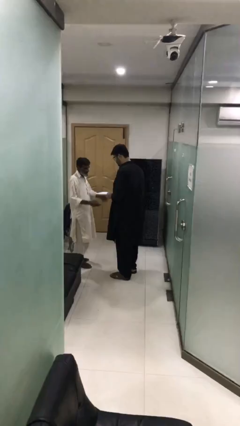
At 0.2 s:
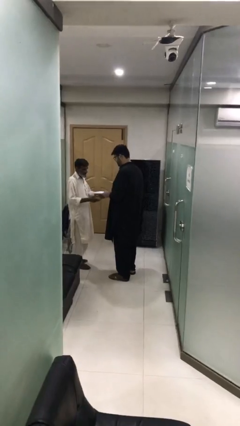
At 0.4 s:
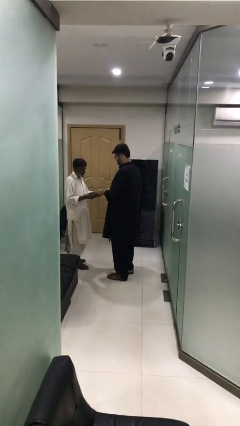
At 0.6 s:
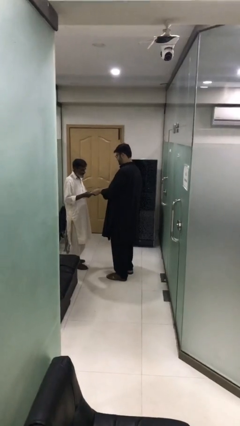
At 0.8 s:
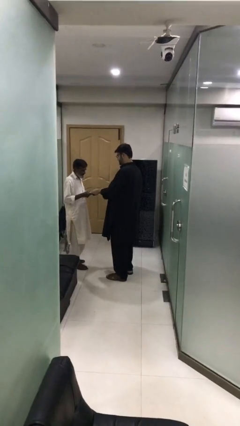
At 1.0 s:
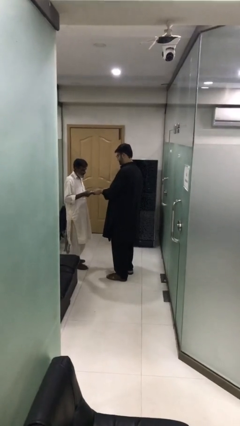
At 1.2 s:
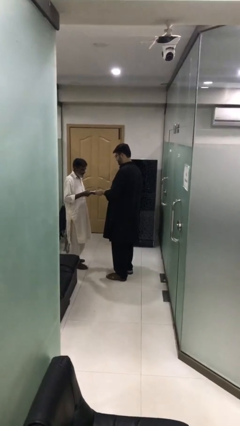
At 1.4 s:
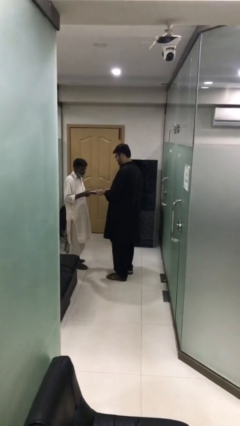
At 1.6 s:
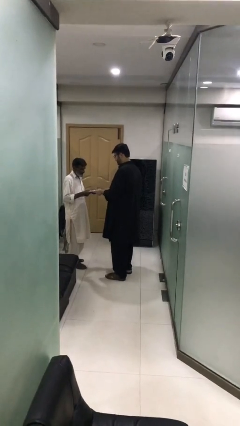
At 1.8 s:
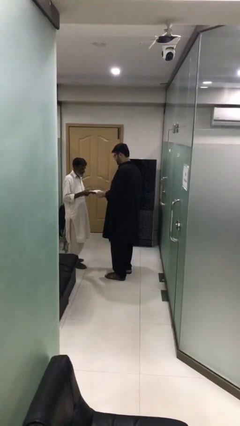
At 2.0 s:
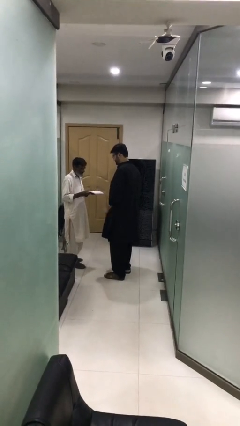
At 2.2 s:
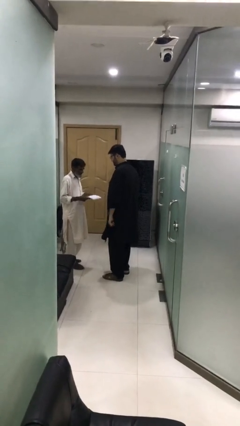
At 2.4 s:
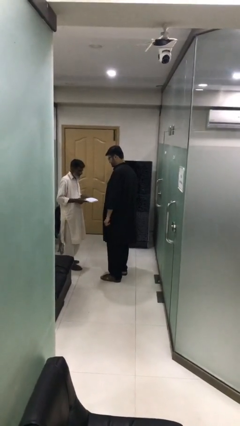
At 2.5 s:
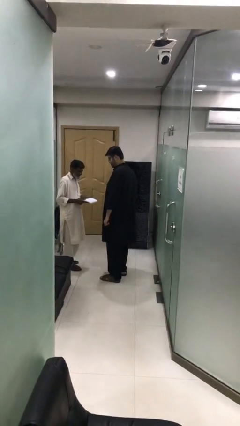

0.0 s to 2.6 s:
person transfers object to person

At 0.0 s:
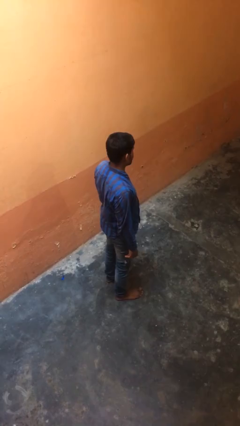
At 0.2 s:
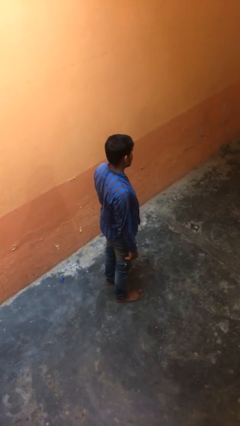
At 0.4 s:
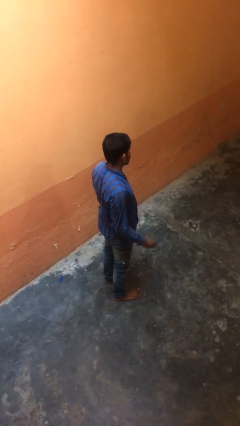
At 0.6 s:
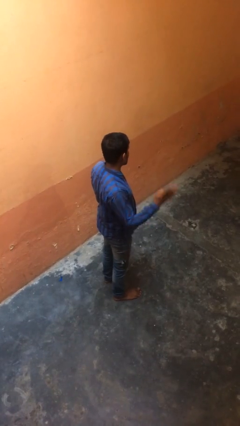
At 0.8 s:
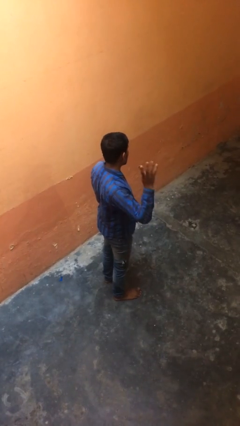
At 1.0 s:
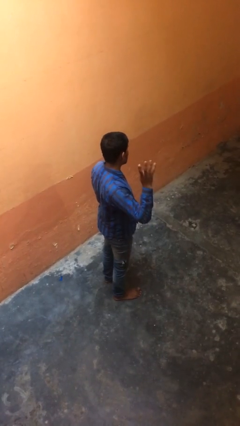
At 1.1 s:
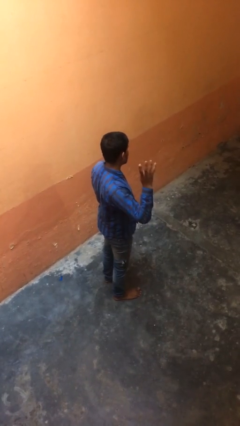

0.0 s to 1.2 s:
person gestures number four

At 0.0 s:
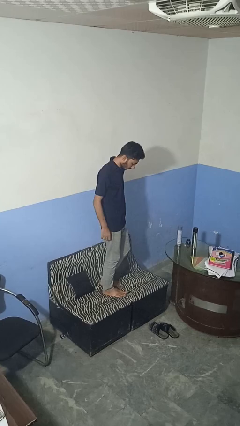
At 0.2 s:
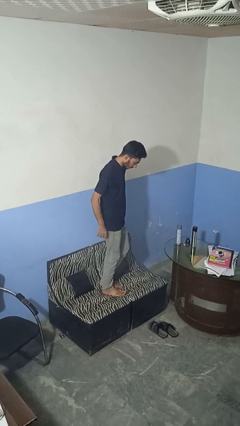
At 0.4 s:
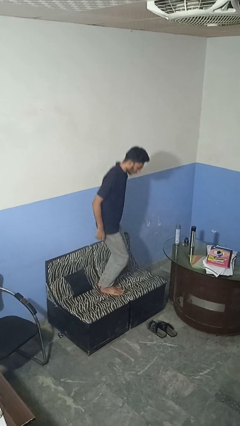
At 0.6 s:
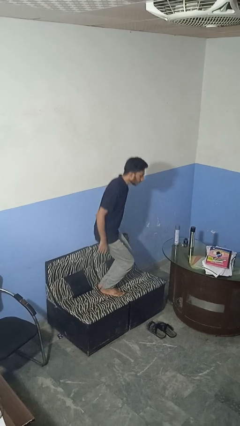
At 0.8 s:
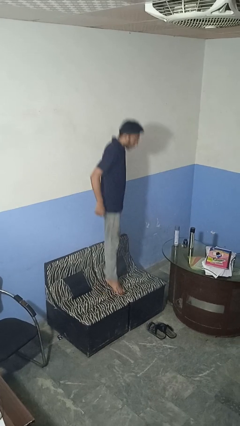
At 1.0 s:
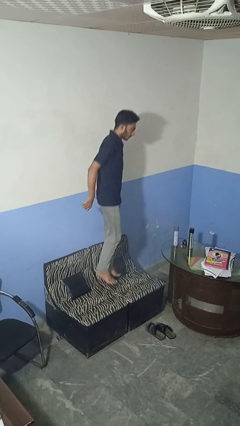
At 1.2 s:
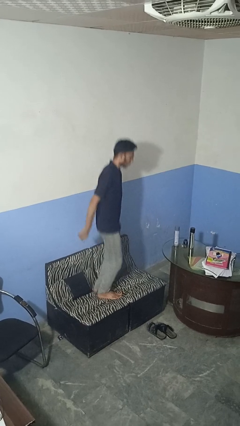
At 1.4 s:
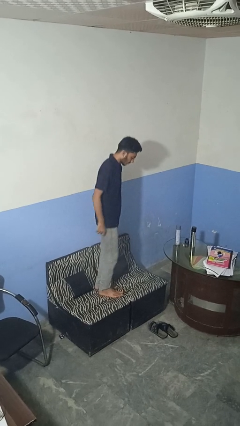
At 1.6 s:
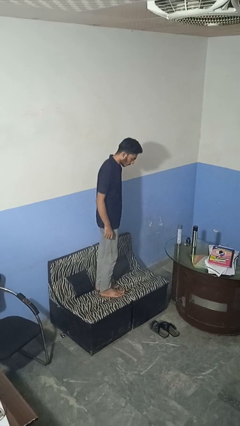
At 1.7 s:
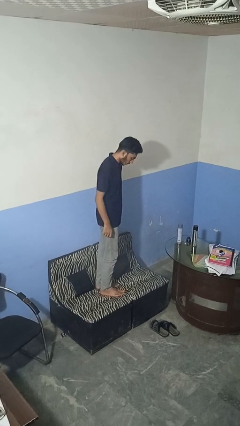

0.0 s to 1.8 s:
person jumps on couch

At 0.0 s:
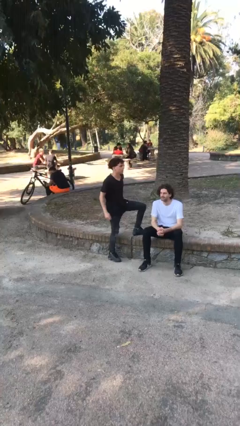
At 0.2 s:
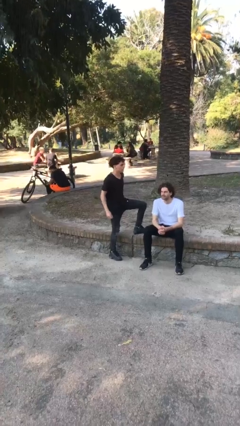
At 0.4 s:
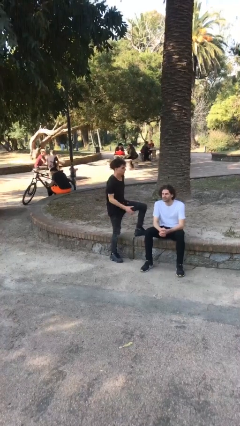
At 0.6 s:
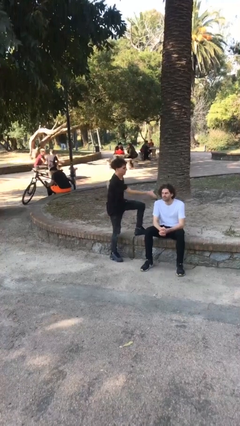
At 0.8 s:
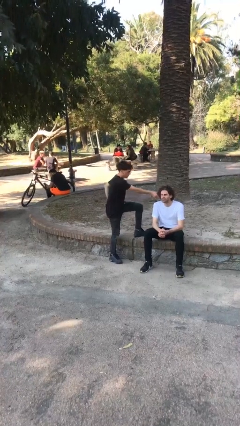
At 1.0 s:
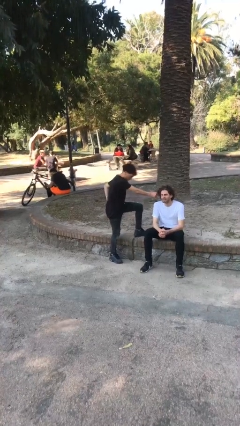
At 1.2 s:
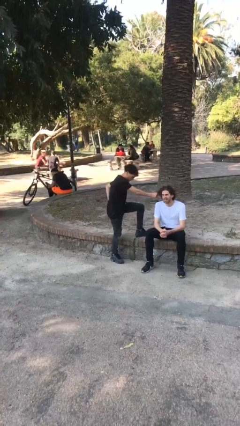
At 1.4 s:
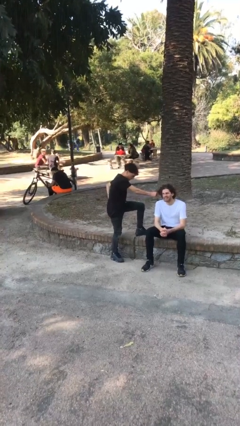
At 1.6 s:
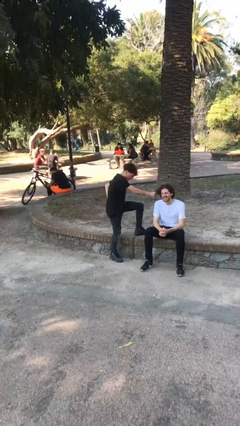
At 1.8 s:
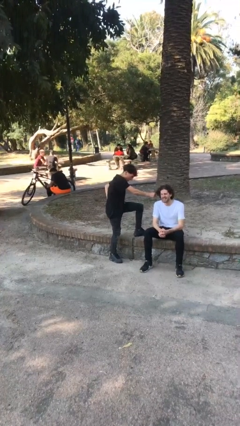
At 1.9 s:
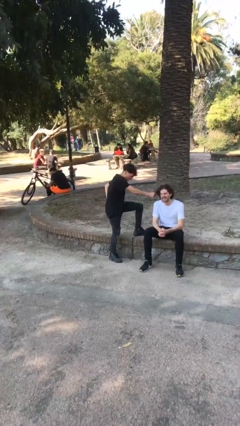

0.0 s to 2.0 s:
person grabs person by hair

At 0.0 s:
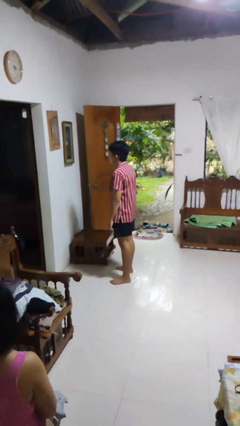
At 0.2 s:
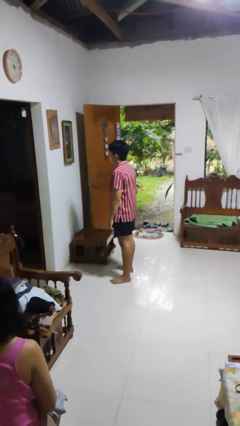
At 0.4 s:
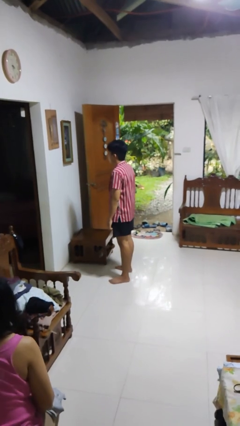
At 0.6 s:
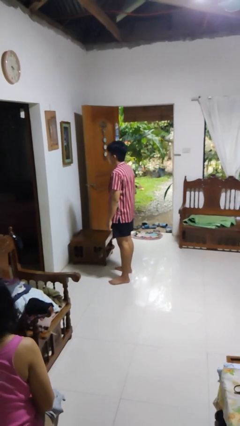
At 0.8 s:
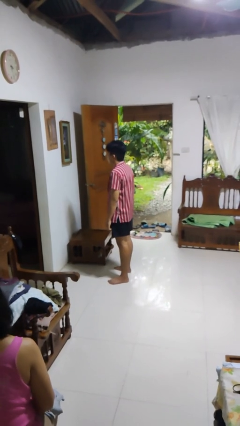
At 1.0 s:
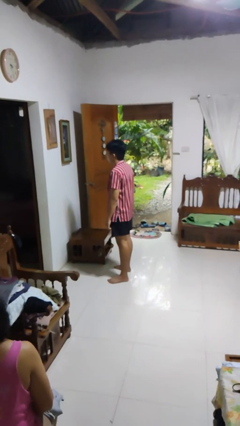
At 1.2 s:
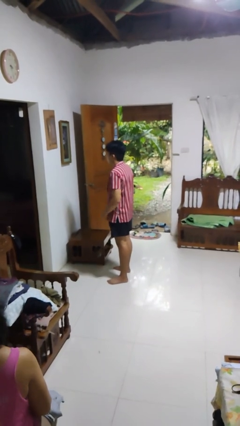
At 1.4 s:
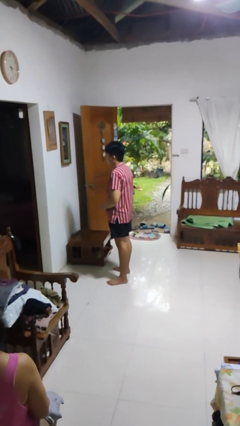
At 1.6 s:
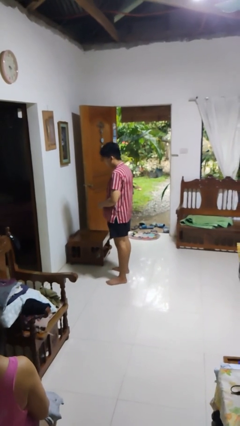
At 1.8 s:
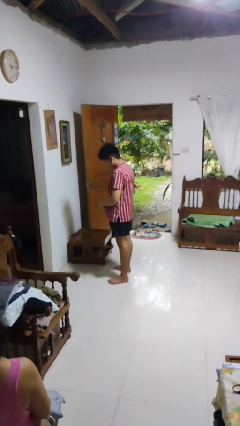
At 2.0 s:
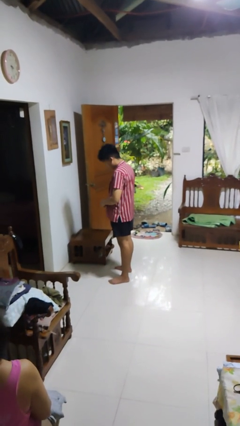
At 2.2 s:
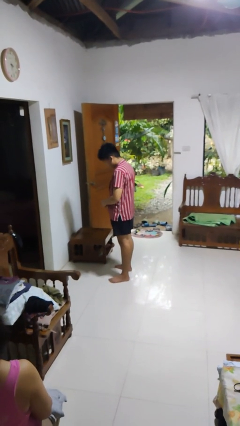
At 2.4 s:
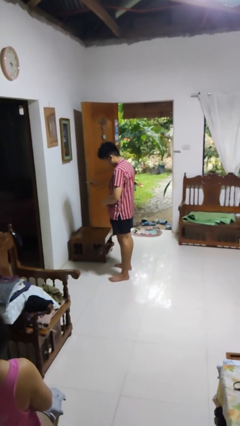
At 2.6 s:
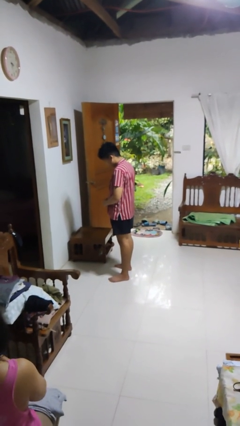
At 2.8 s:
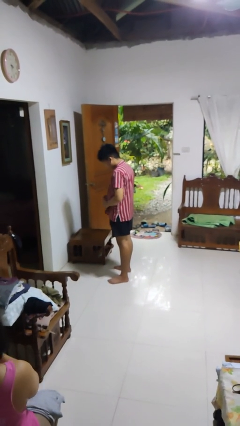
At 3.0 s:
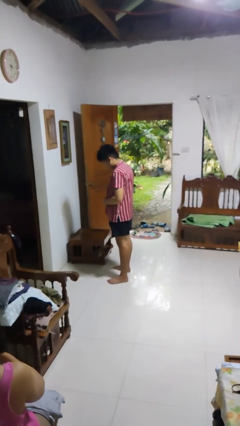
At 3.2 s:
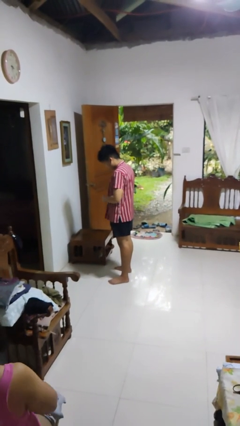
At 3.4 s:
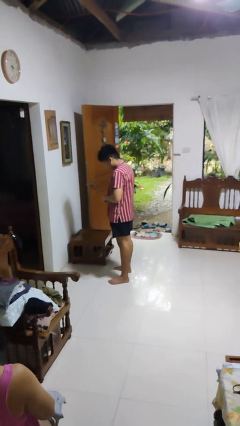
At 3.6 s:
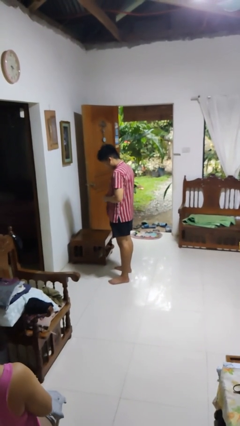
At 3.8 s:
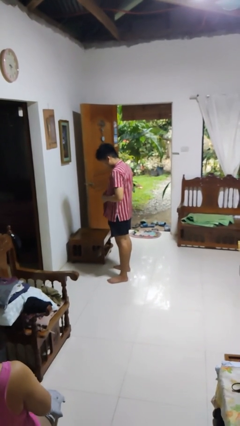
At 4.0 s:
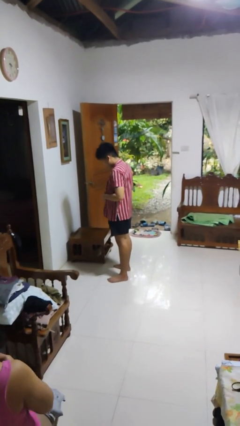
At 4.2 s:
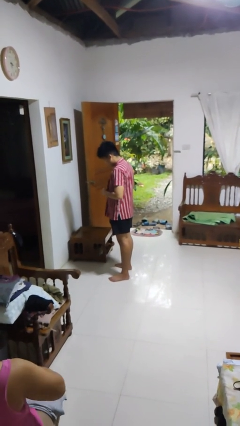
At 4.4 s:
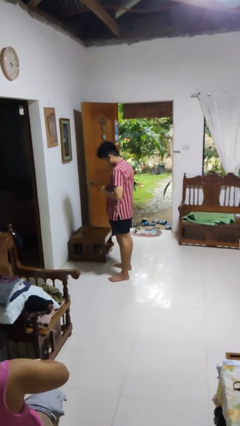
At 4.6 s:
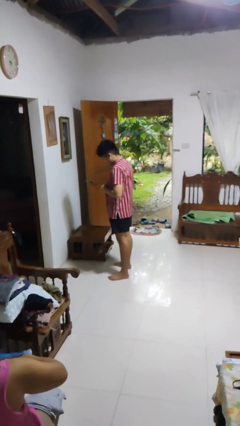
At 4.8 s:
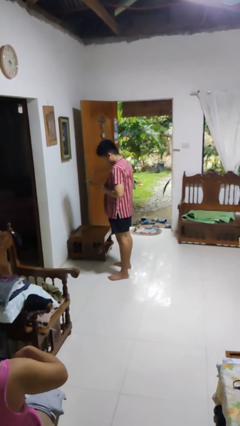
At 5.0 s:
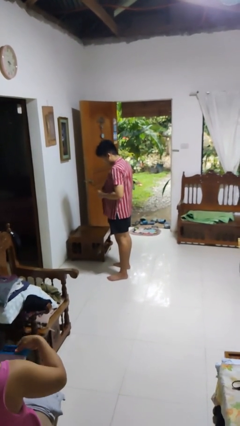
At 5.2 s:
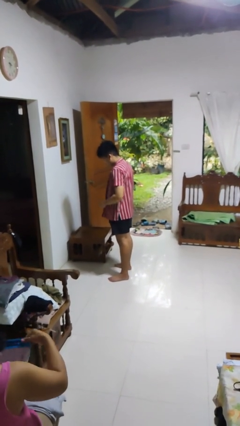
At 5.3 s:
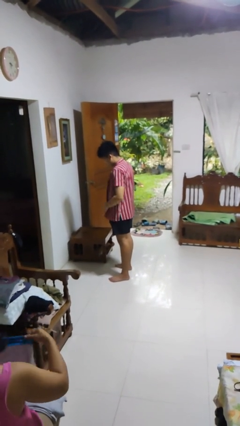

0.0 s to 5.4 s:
person unbuttons shirt

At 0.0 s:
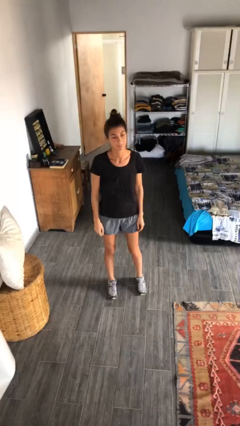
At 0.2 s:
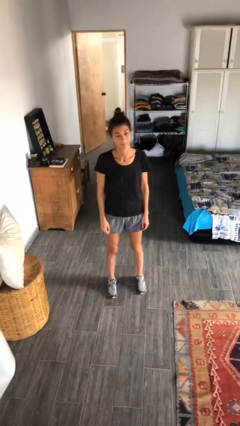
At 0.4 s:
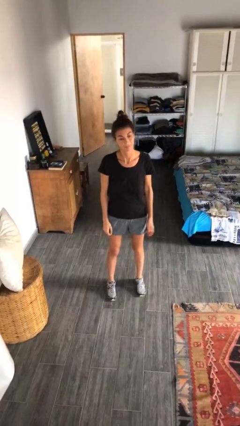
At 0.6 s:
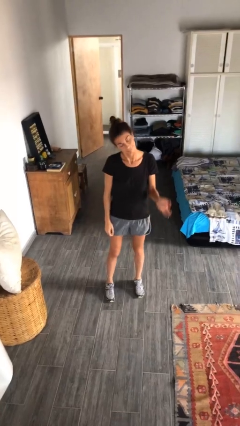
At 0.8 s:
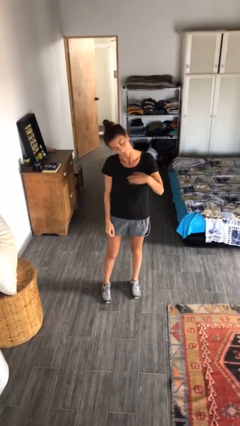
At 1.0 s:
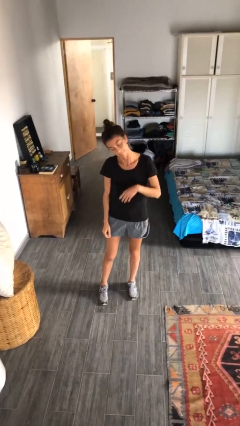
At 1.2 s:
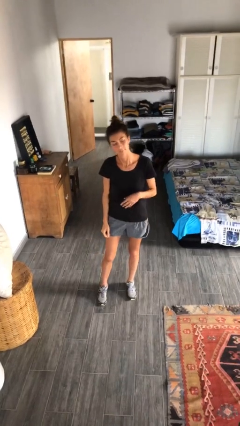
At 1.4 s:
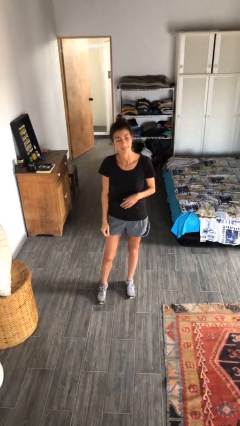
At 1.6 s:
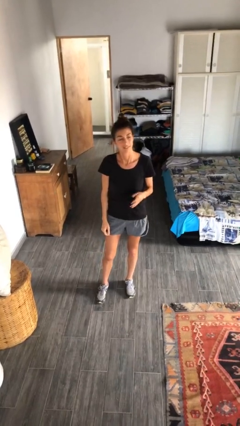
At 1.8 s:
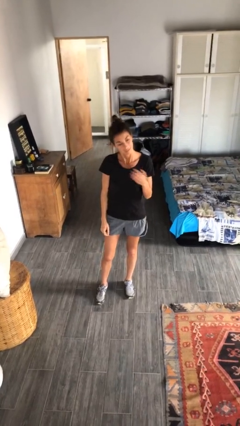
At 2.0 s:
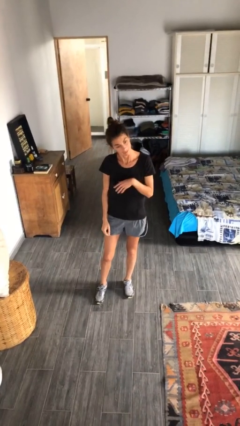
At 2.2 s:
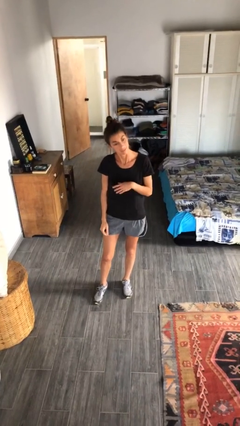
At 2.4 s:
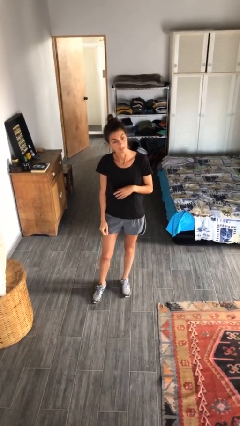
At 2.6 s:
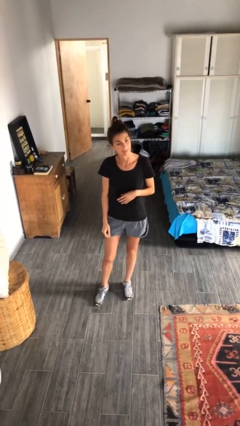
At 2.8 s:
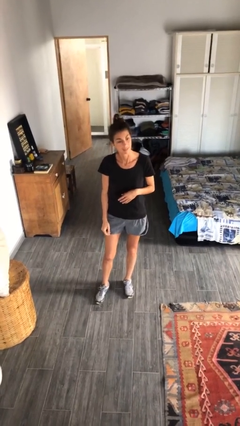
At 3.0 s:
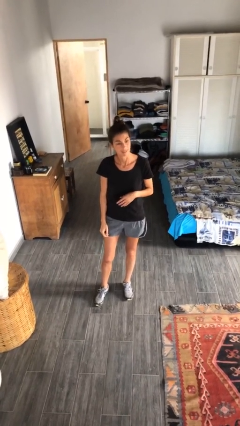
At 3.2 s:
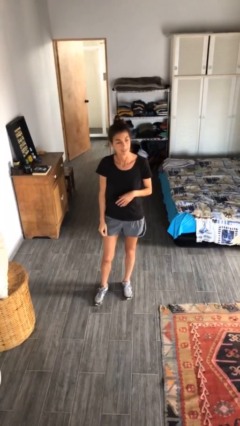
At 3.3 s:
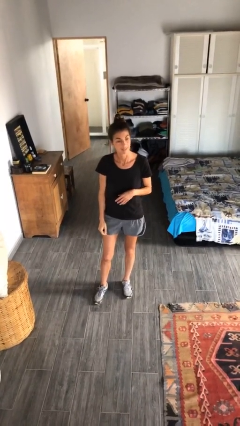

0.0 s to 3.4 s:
person gestures come here

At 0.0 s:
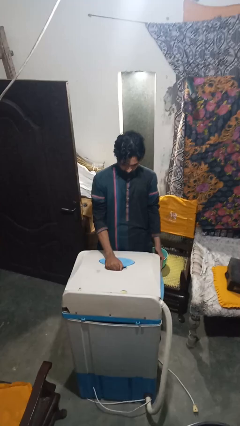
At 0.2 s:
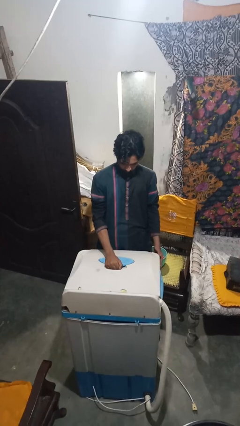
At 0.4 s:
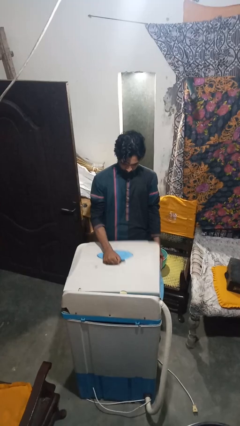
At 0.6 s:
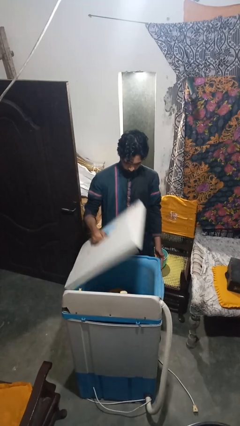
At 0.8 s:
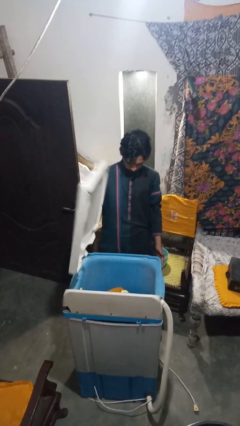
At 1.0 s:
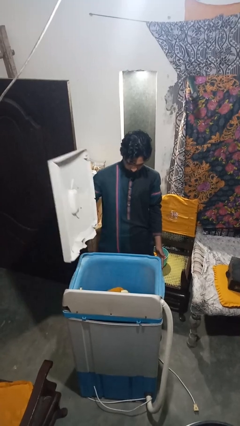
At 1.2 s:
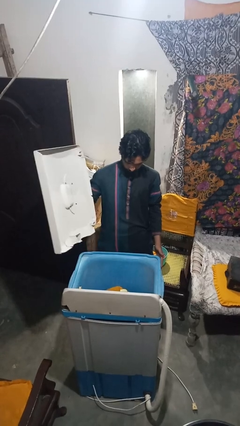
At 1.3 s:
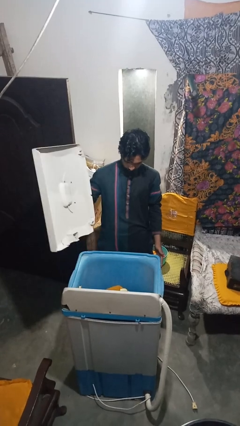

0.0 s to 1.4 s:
person opens clothes washer
